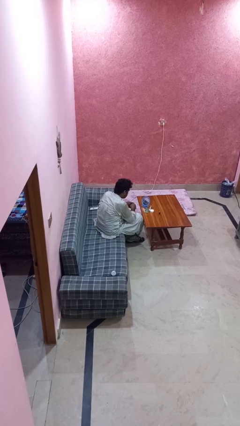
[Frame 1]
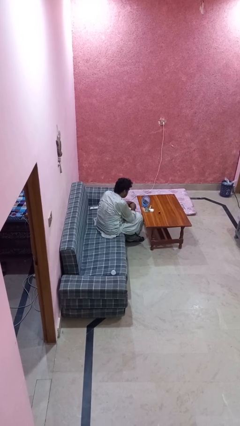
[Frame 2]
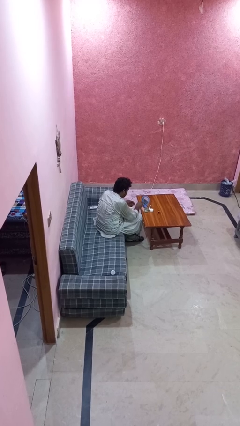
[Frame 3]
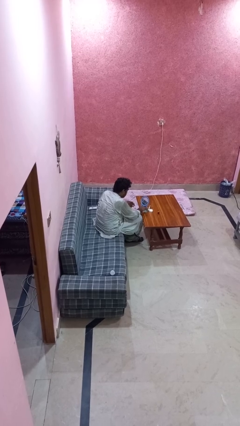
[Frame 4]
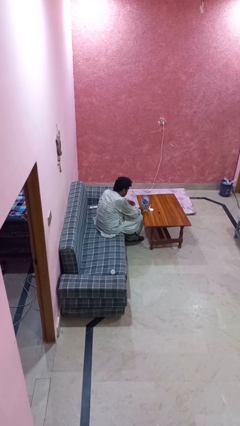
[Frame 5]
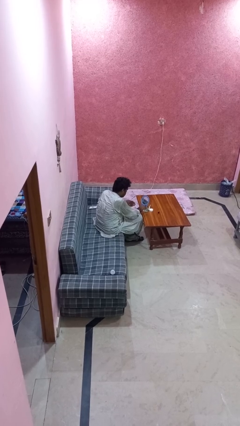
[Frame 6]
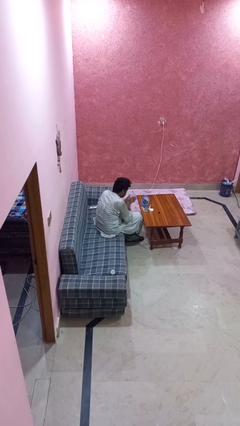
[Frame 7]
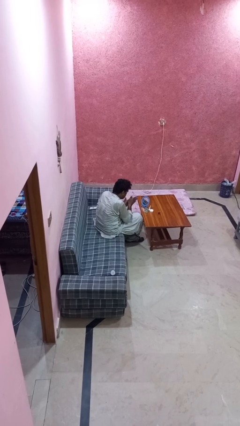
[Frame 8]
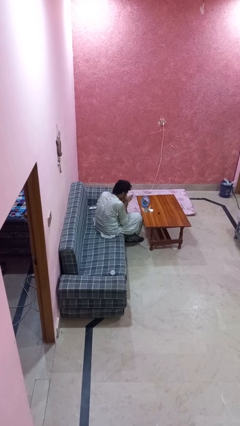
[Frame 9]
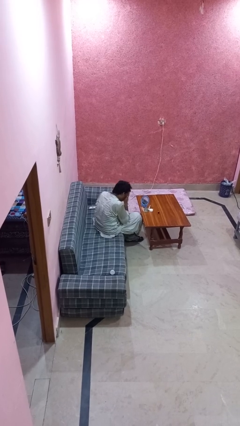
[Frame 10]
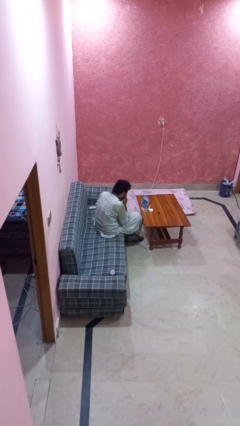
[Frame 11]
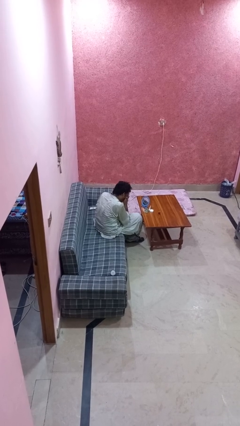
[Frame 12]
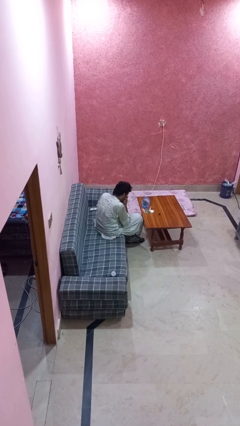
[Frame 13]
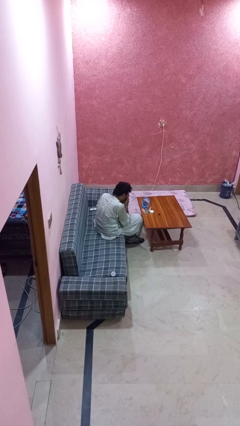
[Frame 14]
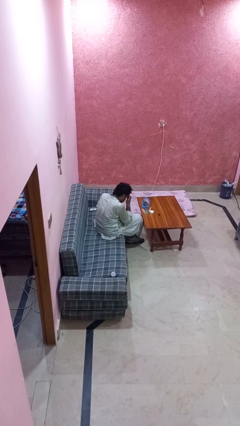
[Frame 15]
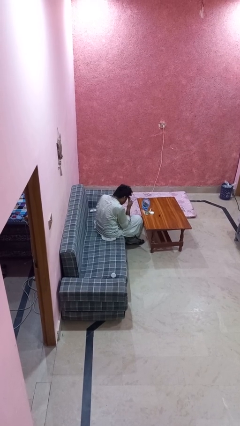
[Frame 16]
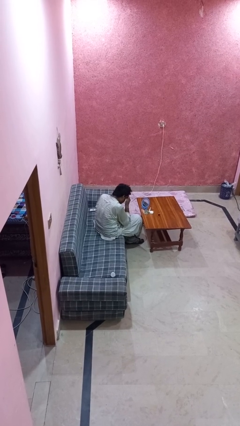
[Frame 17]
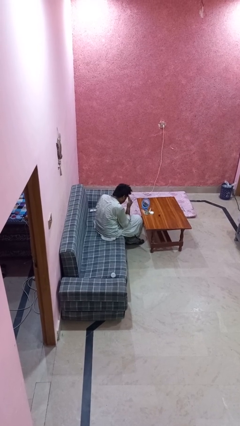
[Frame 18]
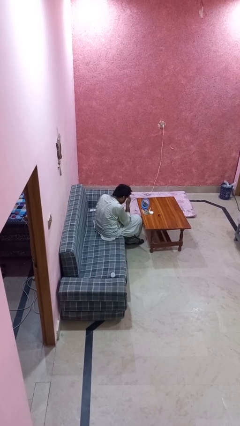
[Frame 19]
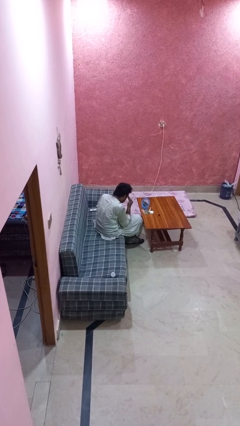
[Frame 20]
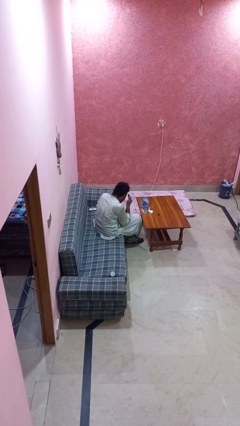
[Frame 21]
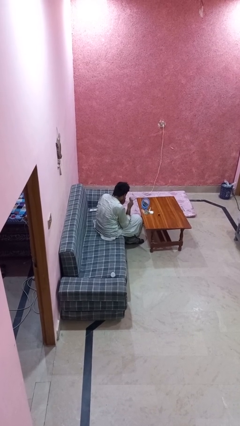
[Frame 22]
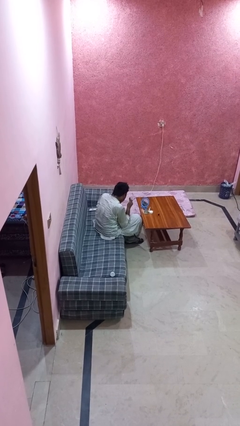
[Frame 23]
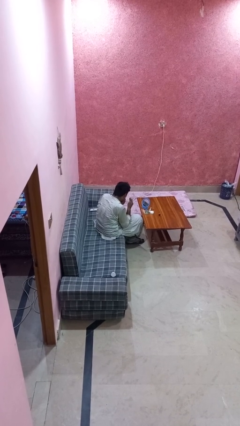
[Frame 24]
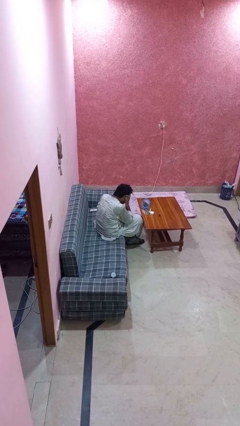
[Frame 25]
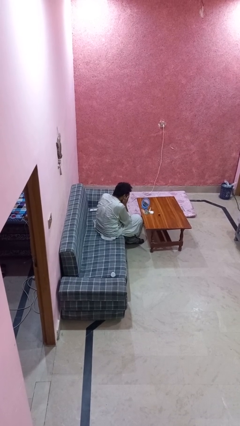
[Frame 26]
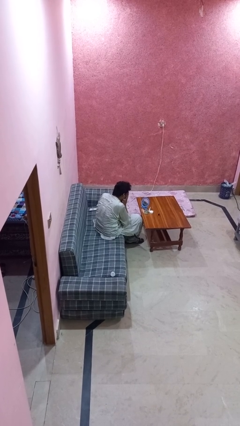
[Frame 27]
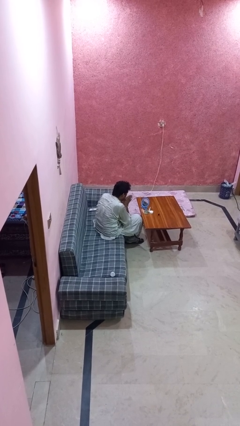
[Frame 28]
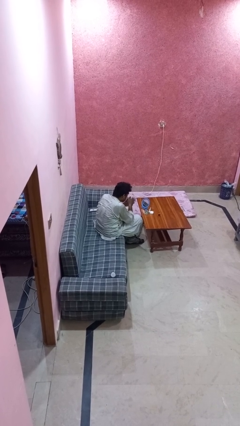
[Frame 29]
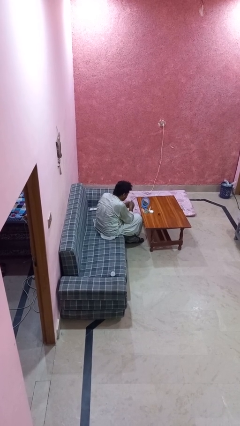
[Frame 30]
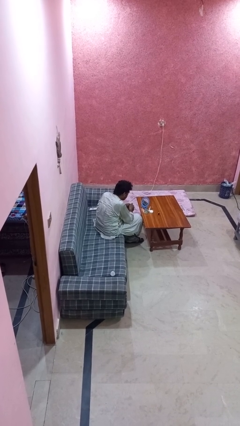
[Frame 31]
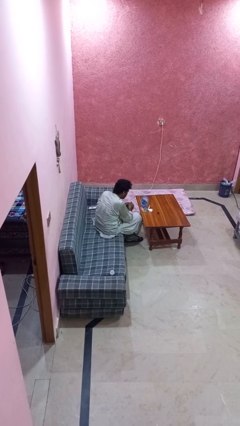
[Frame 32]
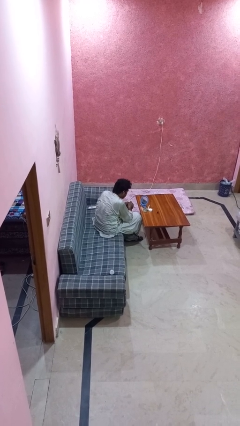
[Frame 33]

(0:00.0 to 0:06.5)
person applies foundation makeup

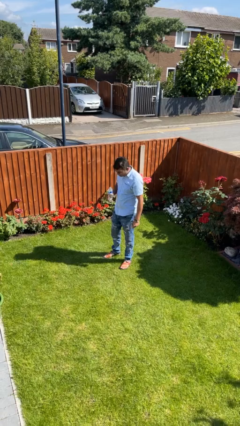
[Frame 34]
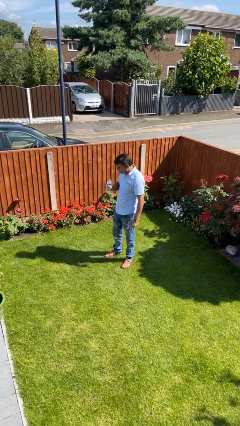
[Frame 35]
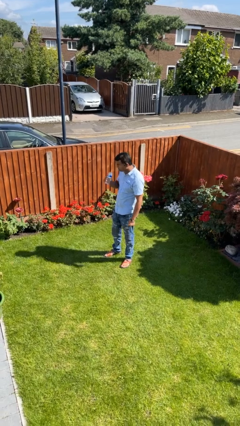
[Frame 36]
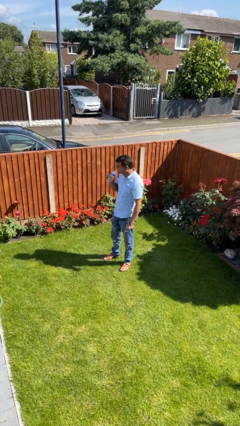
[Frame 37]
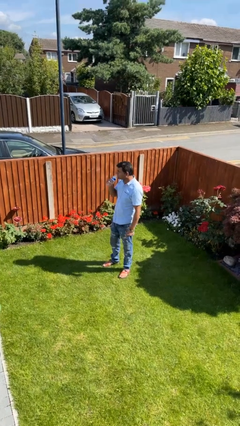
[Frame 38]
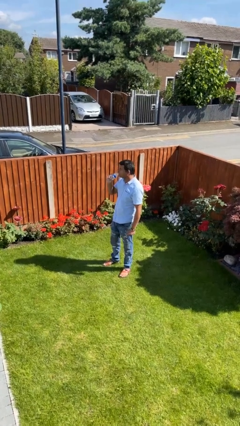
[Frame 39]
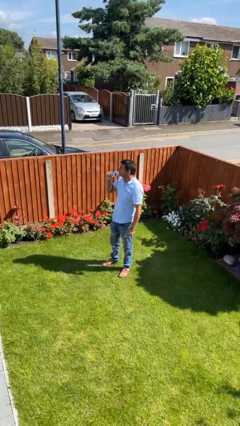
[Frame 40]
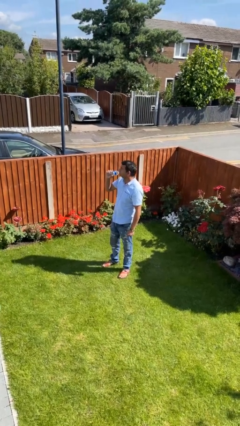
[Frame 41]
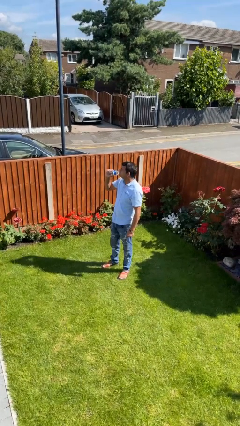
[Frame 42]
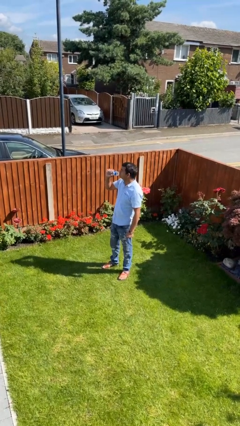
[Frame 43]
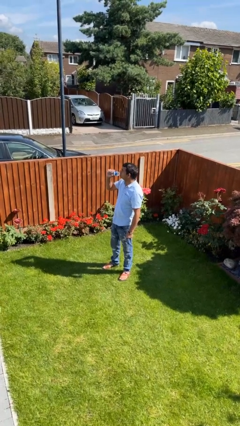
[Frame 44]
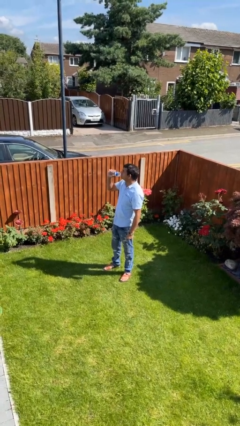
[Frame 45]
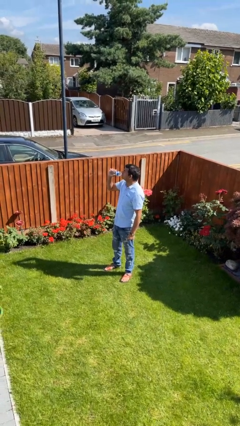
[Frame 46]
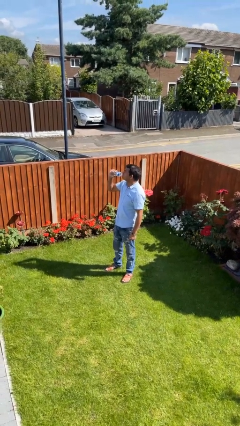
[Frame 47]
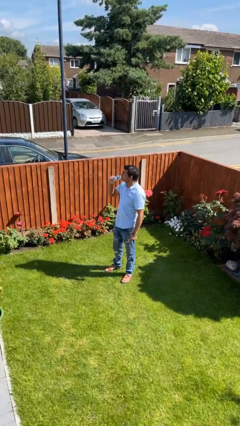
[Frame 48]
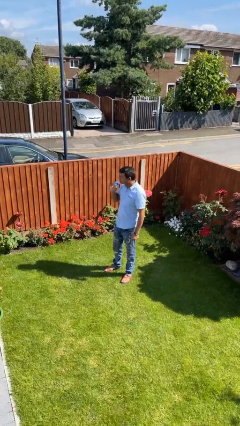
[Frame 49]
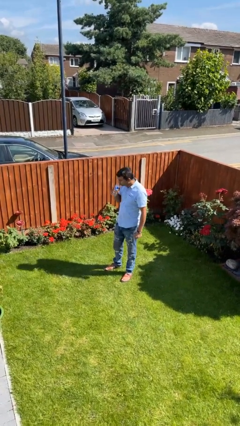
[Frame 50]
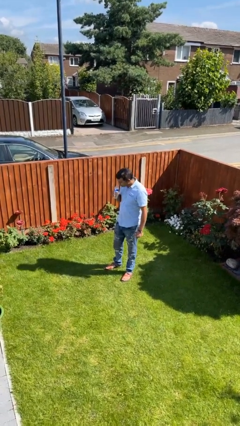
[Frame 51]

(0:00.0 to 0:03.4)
person drinks from bottle

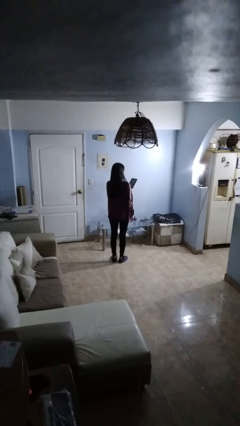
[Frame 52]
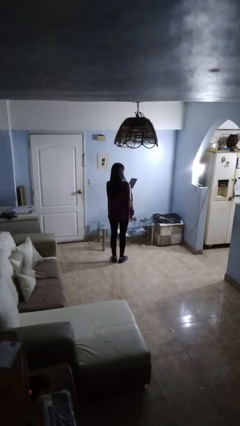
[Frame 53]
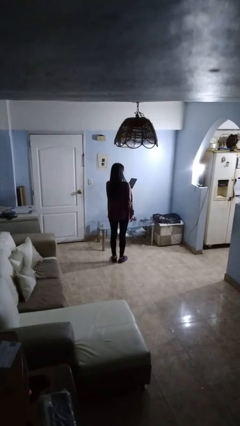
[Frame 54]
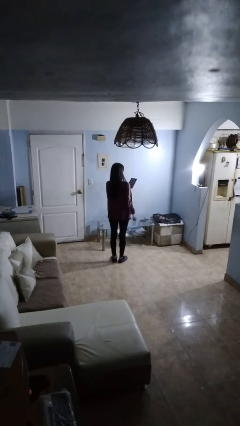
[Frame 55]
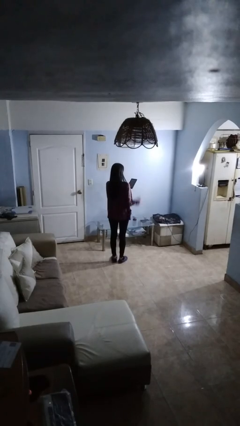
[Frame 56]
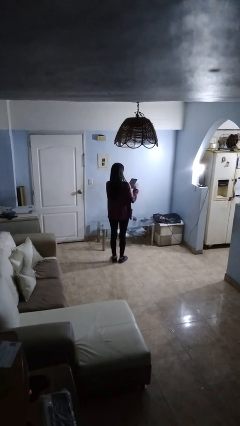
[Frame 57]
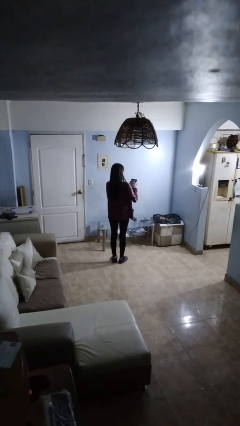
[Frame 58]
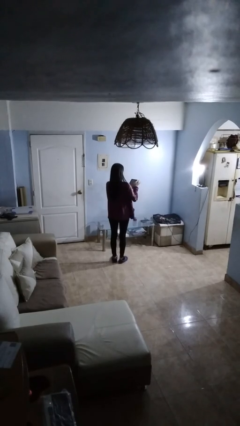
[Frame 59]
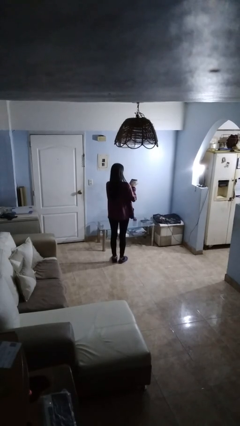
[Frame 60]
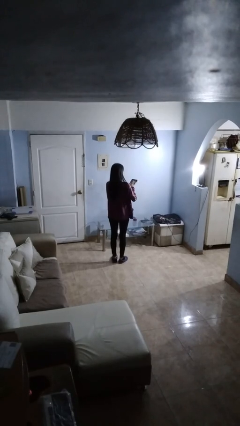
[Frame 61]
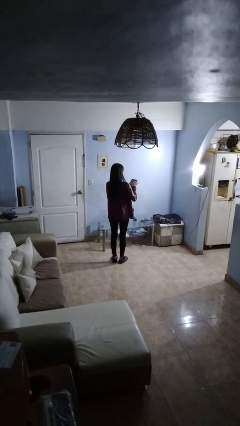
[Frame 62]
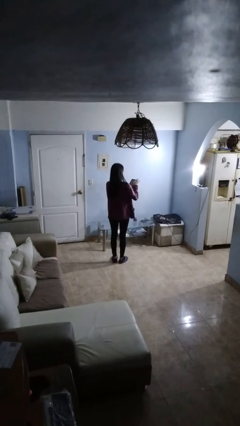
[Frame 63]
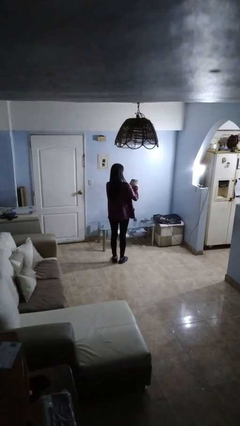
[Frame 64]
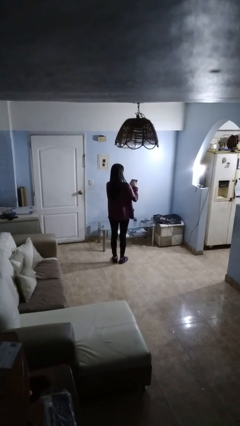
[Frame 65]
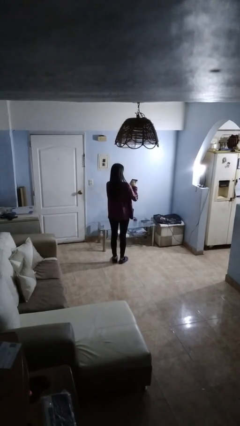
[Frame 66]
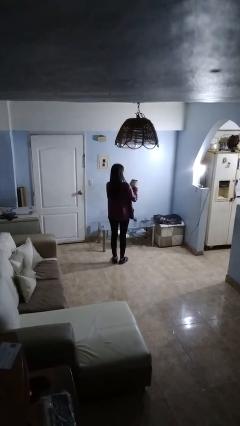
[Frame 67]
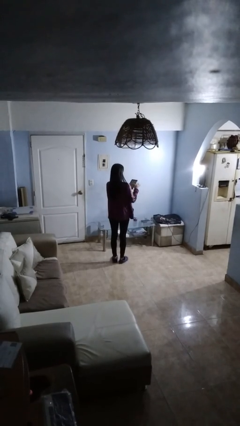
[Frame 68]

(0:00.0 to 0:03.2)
person interacts with tablet

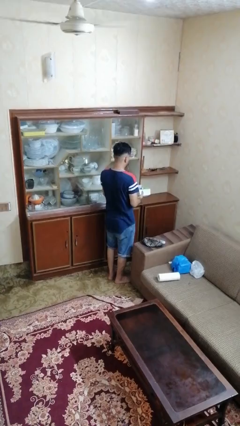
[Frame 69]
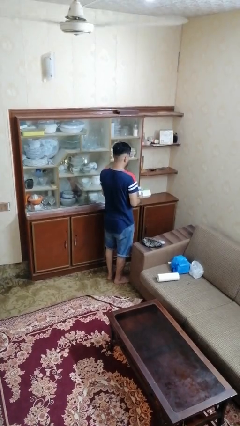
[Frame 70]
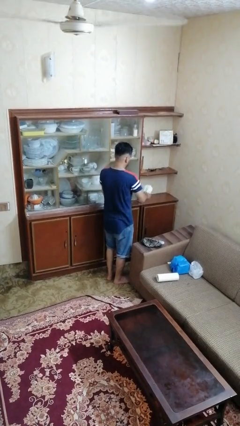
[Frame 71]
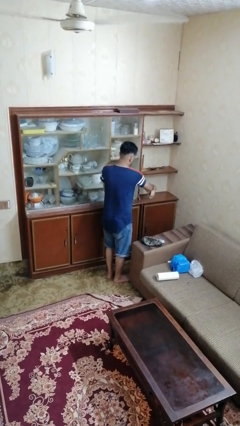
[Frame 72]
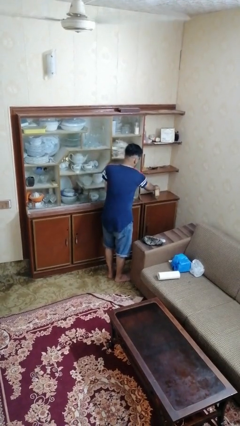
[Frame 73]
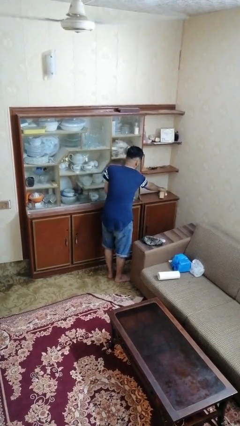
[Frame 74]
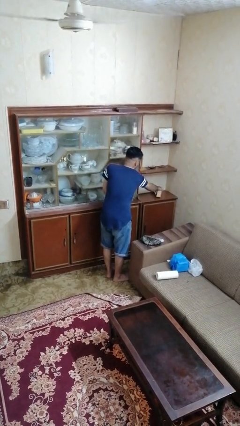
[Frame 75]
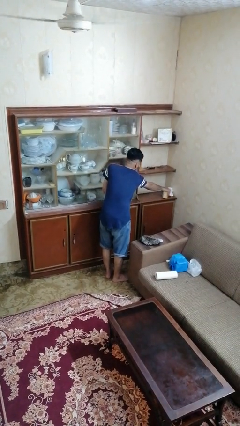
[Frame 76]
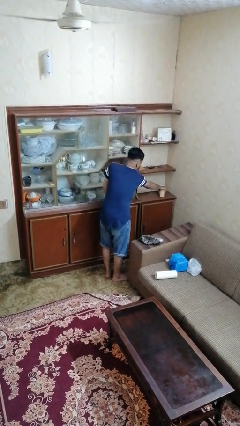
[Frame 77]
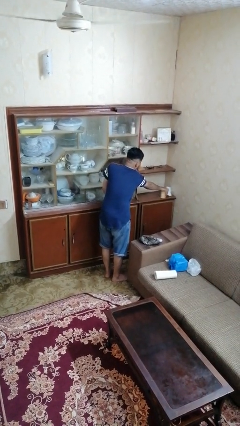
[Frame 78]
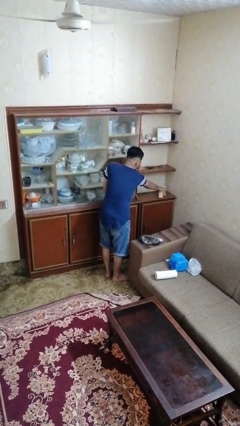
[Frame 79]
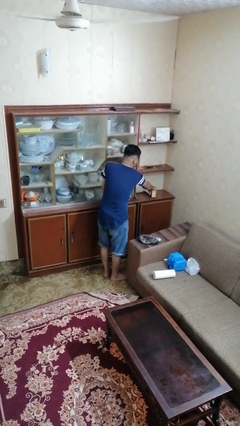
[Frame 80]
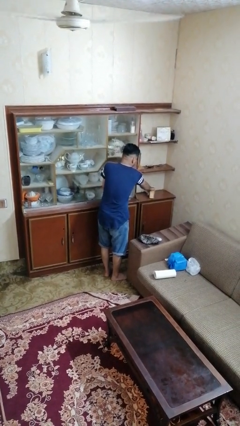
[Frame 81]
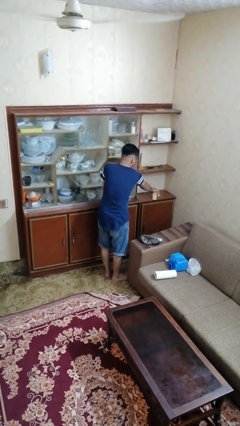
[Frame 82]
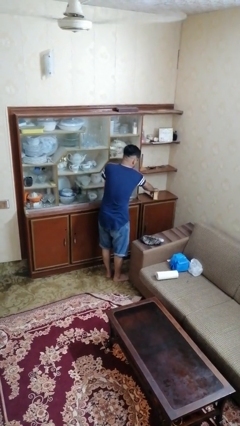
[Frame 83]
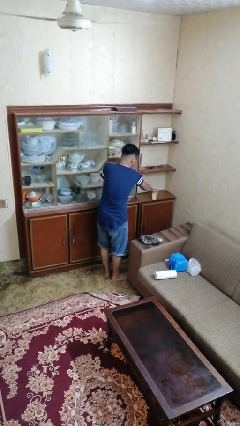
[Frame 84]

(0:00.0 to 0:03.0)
person dusts furniture

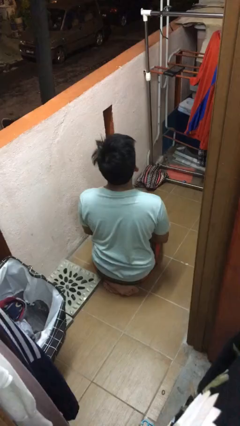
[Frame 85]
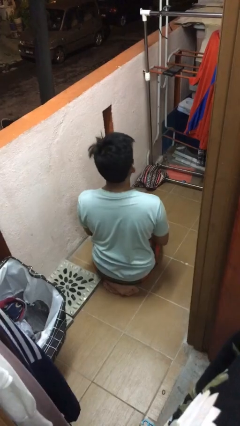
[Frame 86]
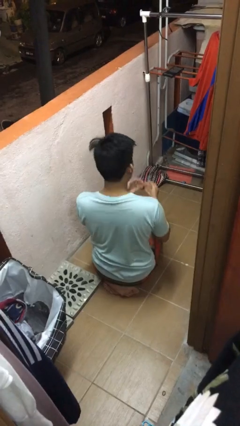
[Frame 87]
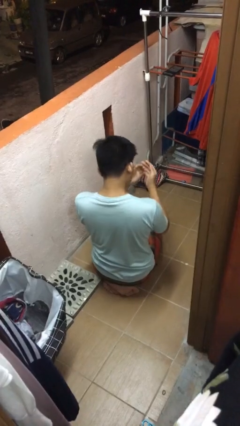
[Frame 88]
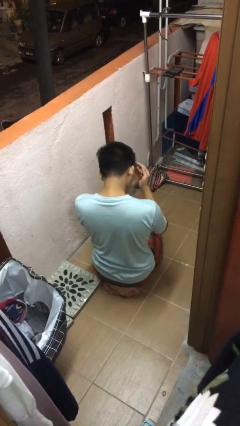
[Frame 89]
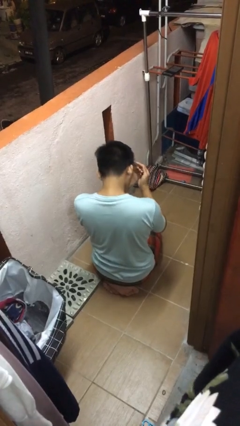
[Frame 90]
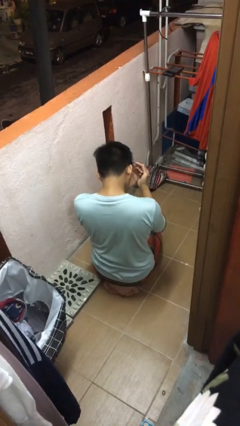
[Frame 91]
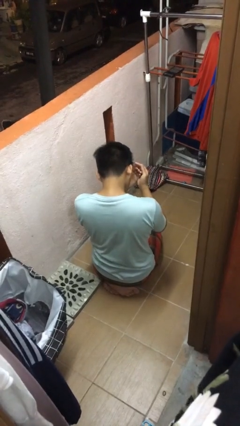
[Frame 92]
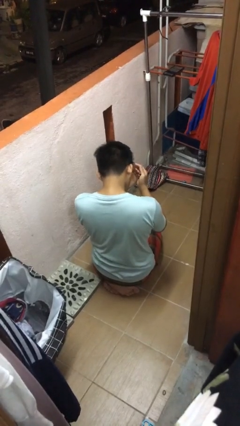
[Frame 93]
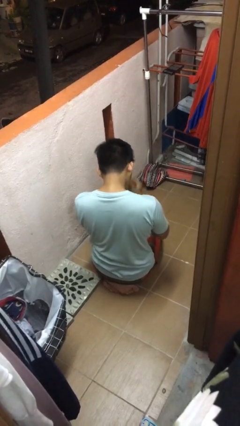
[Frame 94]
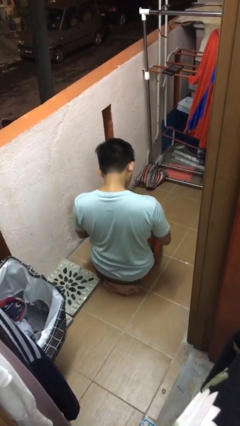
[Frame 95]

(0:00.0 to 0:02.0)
person prays
